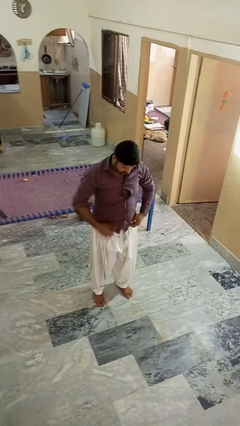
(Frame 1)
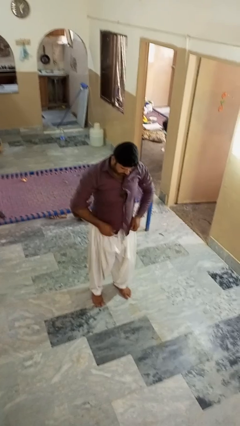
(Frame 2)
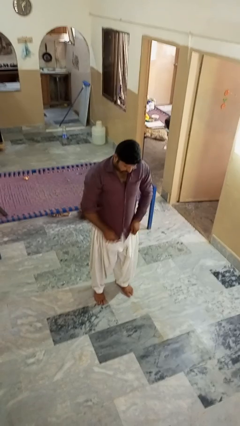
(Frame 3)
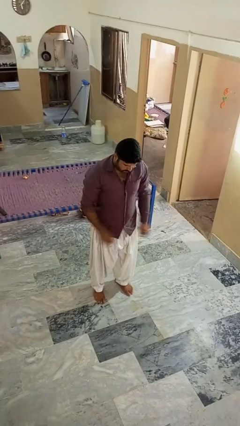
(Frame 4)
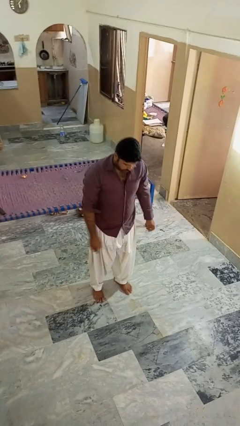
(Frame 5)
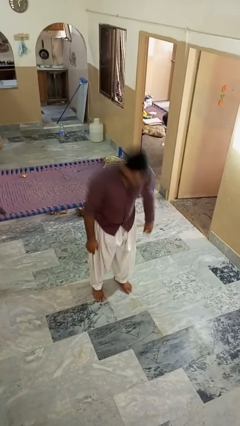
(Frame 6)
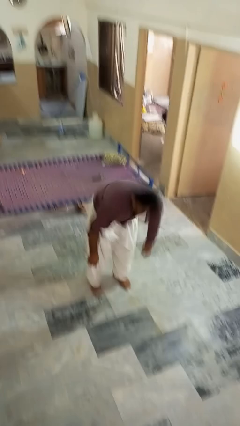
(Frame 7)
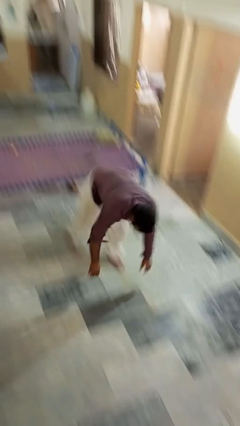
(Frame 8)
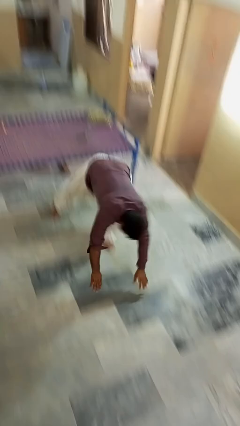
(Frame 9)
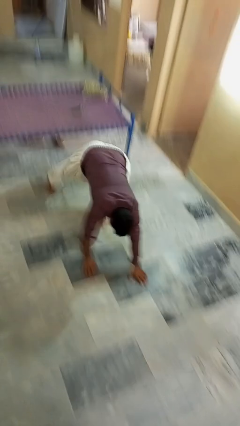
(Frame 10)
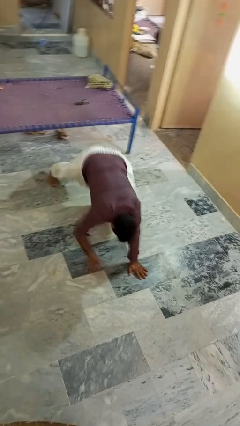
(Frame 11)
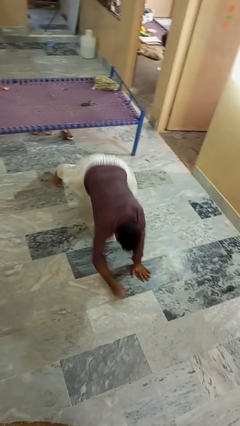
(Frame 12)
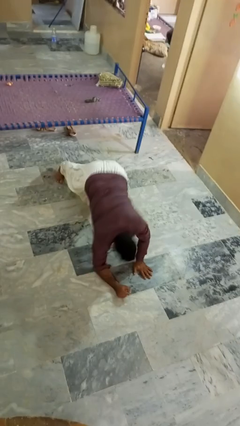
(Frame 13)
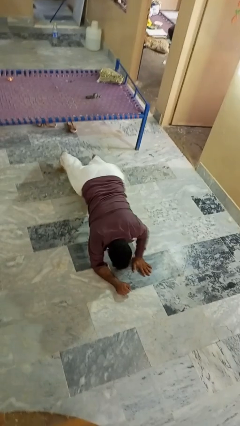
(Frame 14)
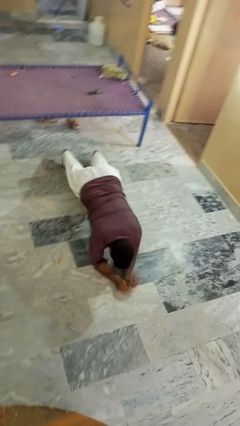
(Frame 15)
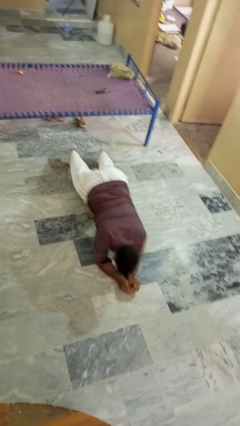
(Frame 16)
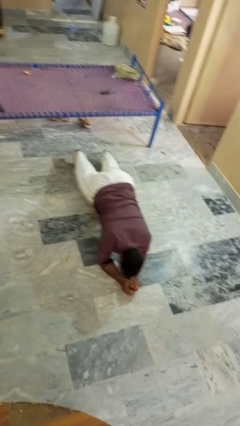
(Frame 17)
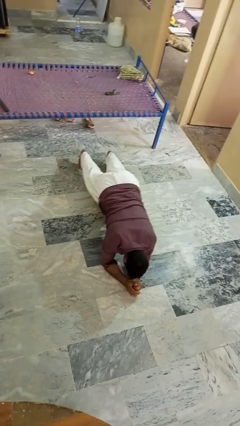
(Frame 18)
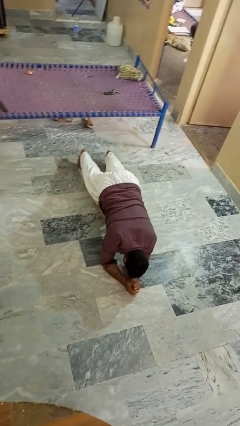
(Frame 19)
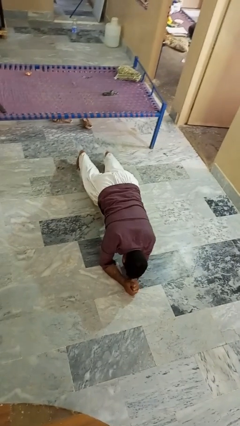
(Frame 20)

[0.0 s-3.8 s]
person exercises with plank

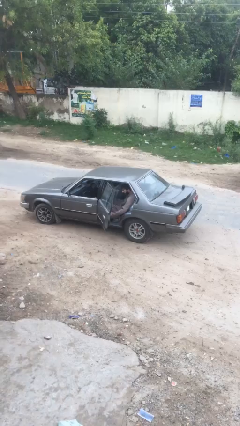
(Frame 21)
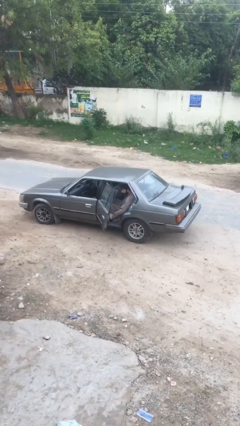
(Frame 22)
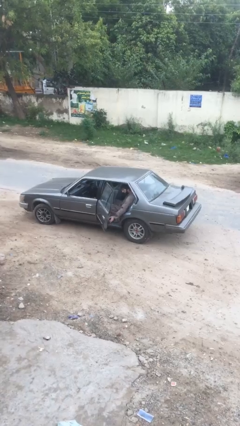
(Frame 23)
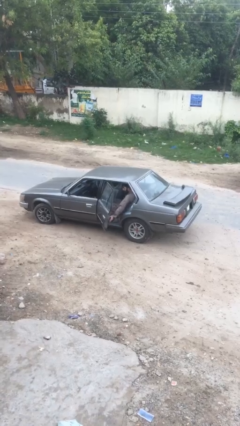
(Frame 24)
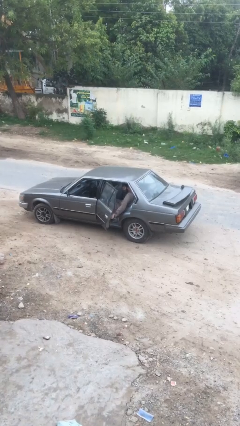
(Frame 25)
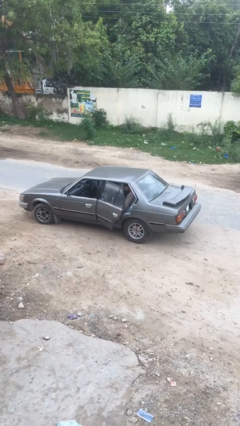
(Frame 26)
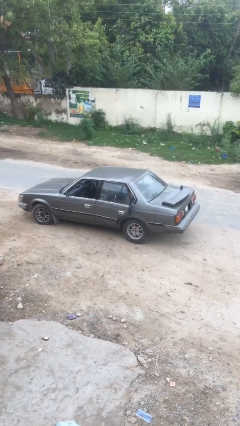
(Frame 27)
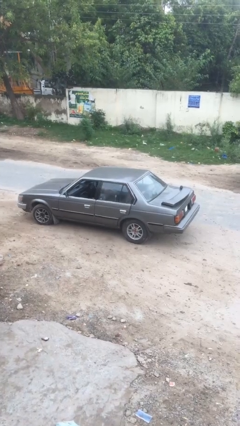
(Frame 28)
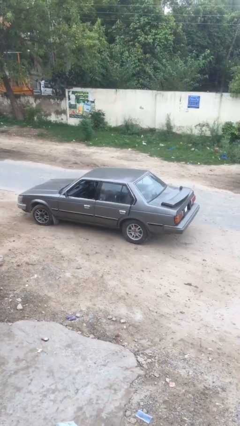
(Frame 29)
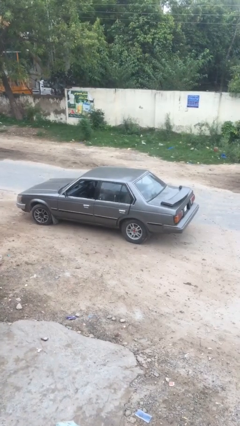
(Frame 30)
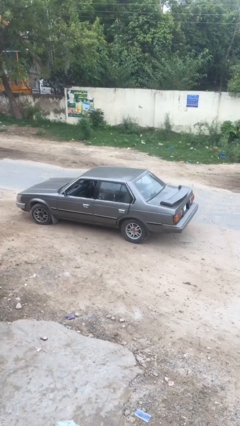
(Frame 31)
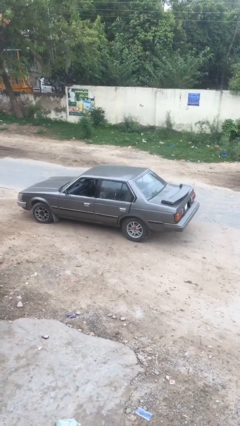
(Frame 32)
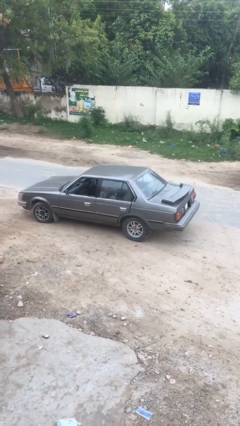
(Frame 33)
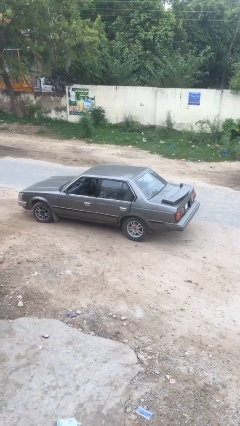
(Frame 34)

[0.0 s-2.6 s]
person closes car door

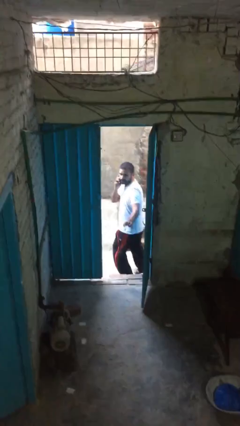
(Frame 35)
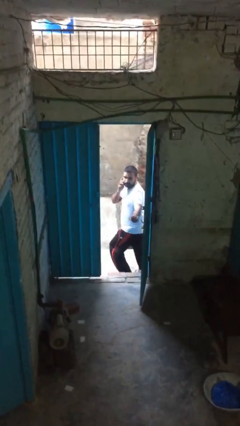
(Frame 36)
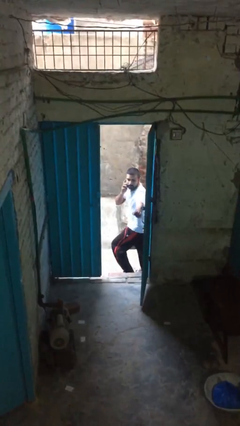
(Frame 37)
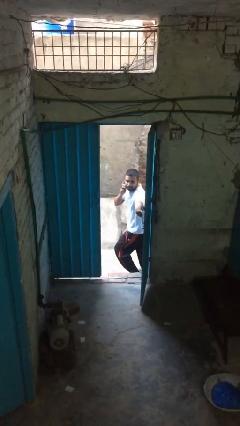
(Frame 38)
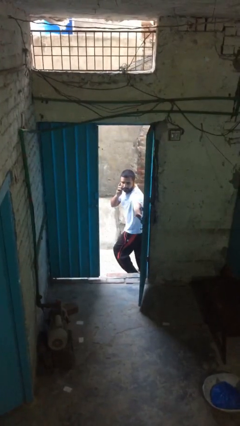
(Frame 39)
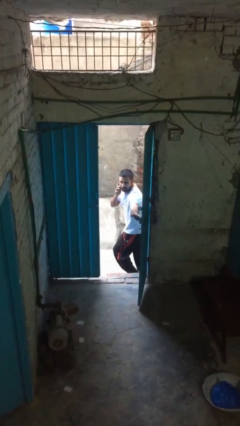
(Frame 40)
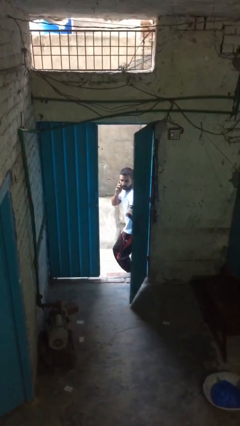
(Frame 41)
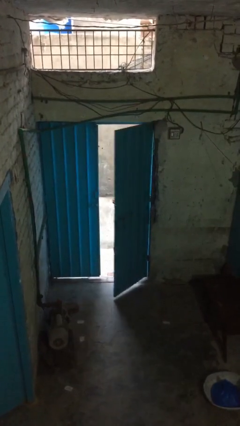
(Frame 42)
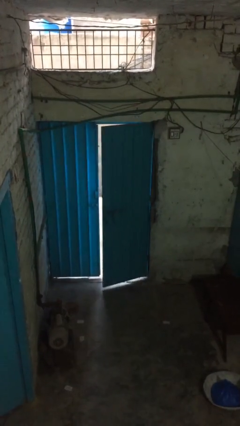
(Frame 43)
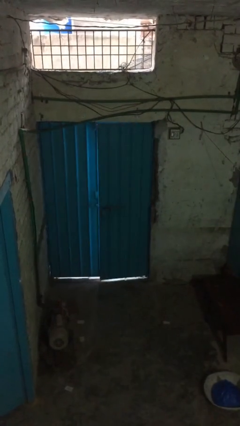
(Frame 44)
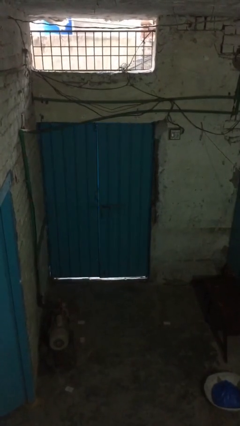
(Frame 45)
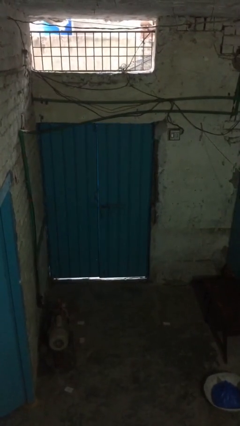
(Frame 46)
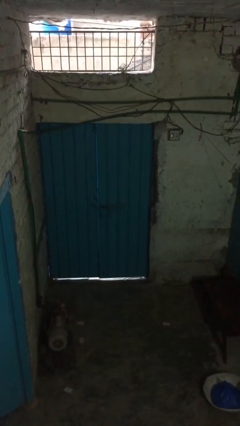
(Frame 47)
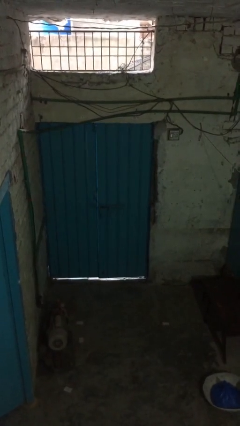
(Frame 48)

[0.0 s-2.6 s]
person closes facility door

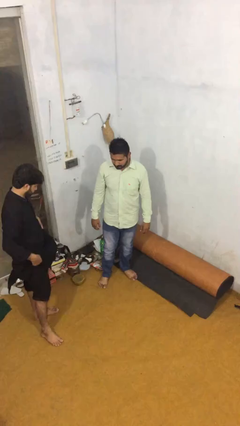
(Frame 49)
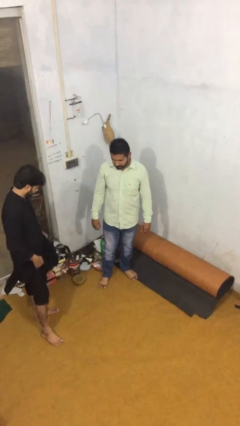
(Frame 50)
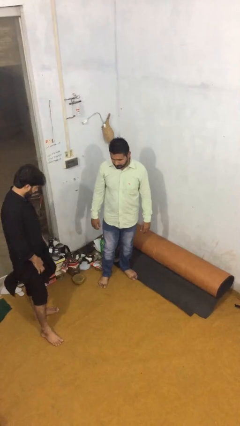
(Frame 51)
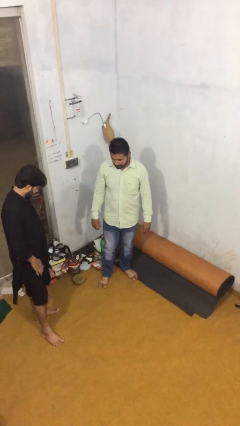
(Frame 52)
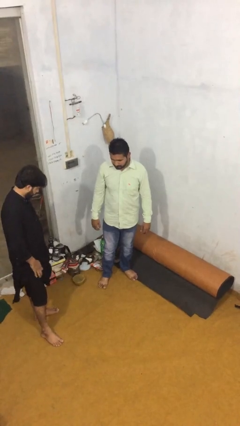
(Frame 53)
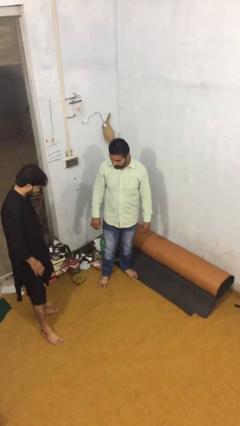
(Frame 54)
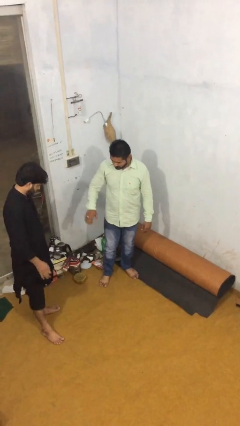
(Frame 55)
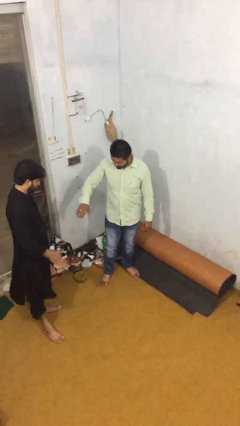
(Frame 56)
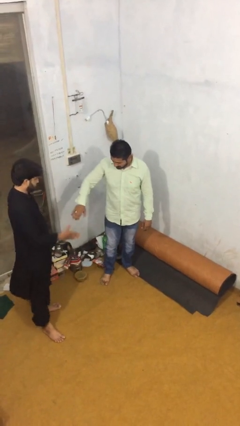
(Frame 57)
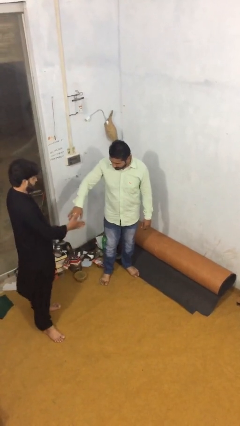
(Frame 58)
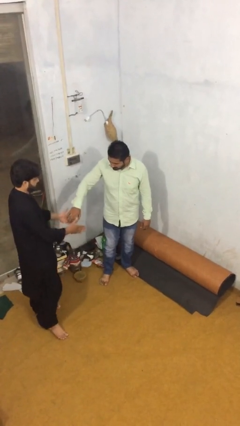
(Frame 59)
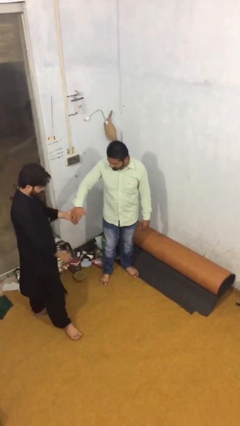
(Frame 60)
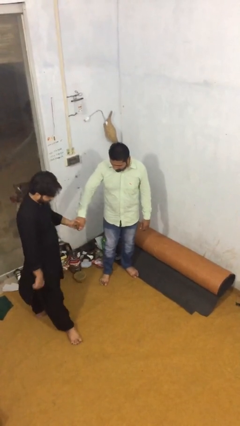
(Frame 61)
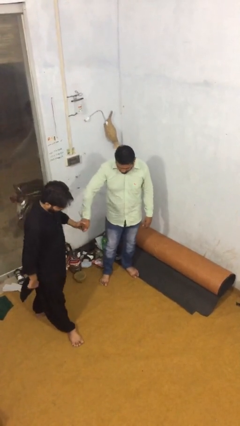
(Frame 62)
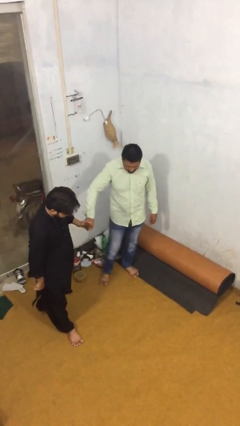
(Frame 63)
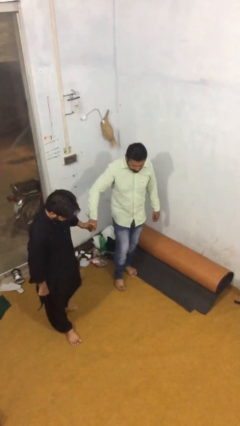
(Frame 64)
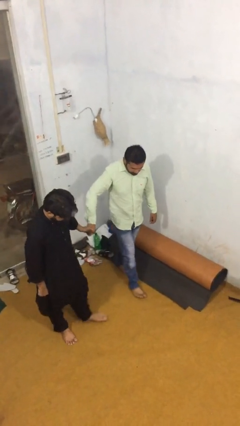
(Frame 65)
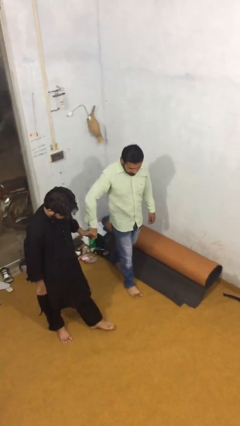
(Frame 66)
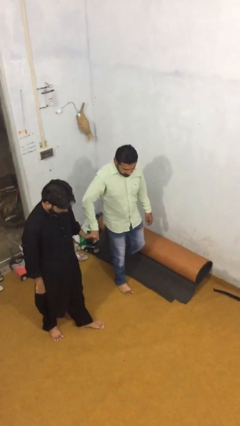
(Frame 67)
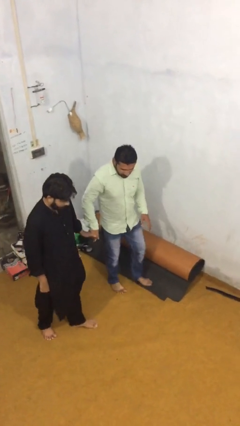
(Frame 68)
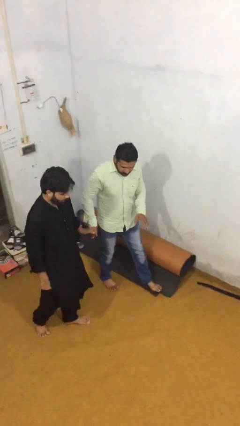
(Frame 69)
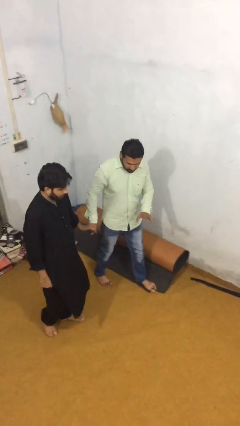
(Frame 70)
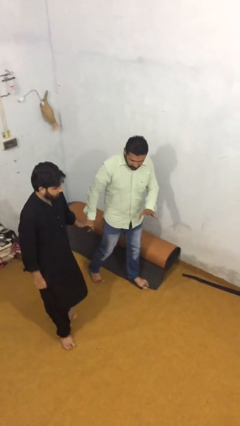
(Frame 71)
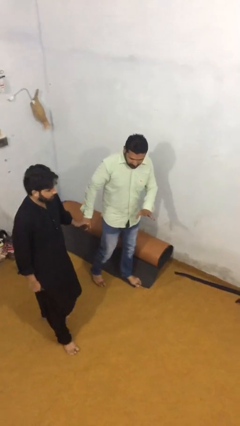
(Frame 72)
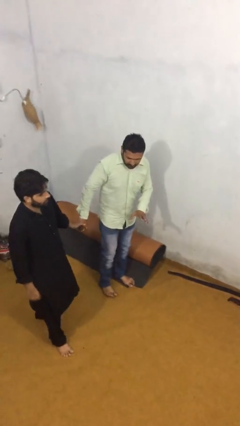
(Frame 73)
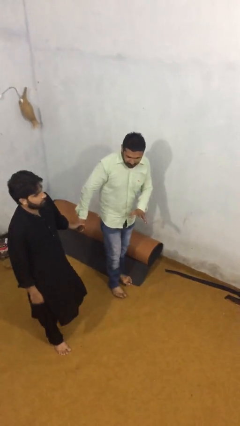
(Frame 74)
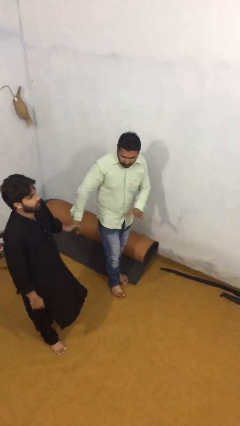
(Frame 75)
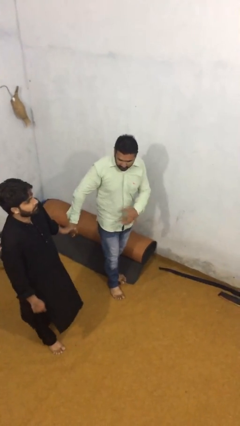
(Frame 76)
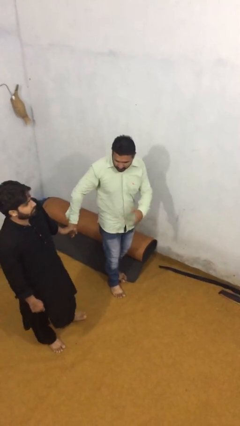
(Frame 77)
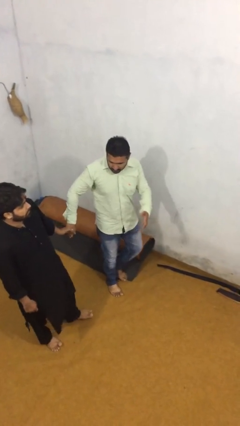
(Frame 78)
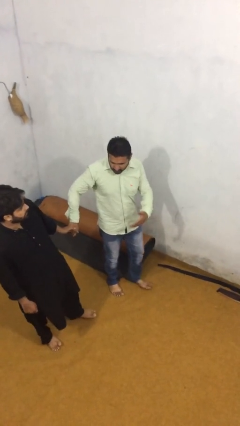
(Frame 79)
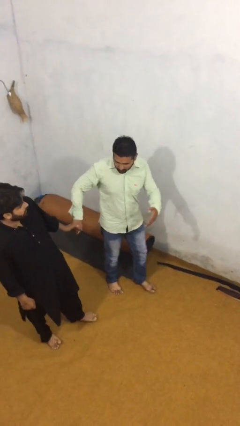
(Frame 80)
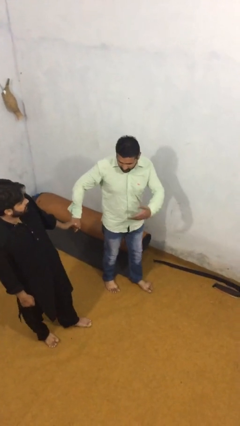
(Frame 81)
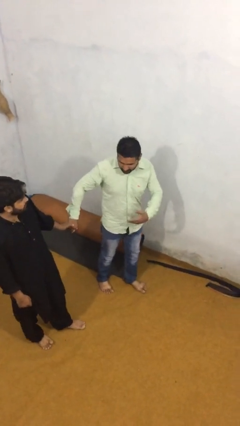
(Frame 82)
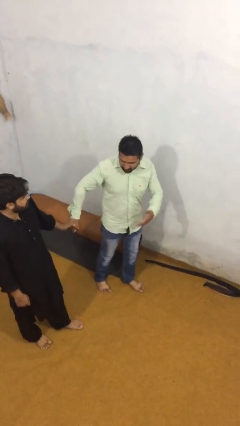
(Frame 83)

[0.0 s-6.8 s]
person holds hand

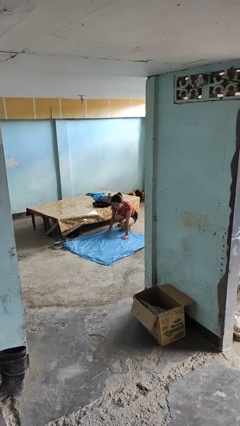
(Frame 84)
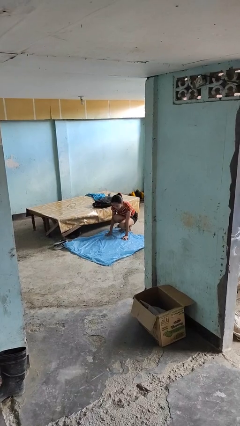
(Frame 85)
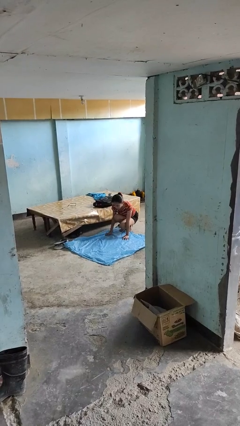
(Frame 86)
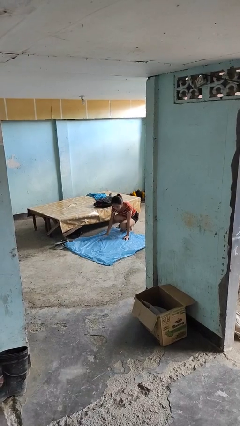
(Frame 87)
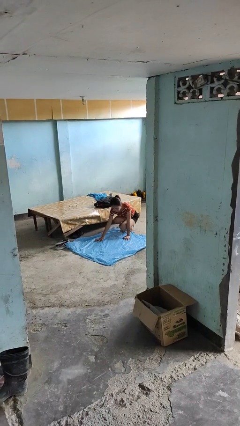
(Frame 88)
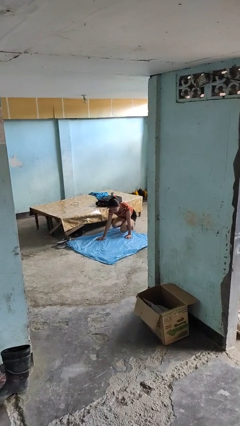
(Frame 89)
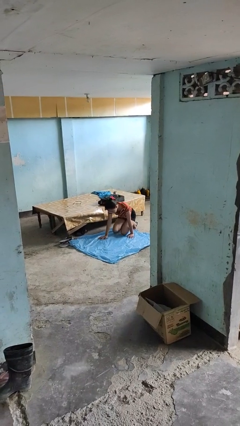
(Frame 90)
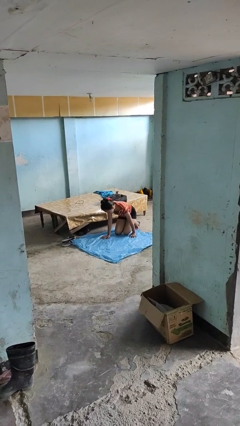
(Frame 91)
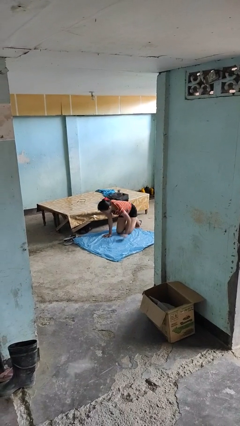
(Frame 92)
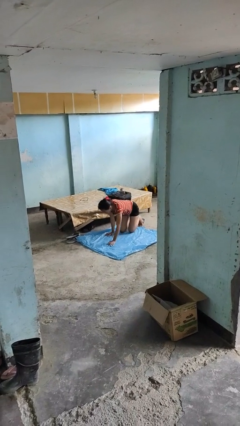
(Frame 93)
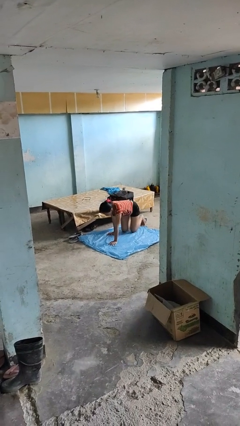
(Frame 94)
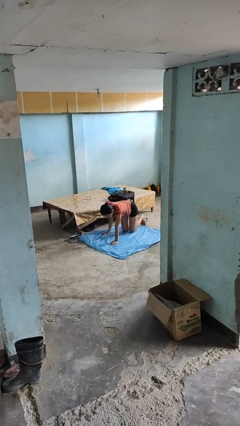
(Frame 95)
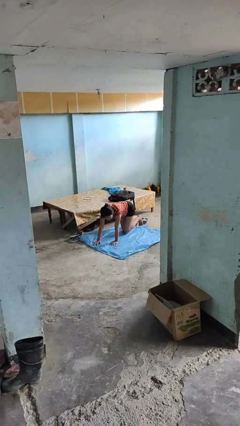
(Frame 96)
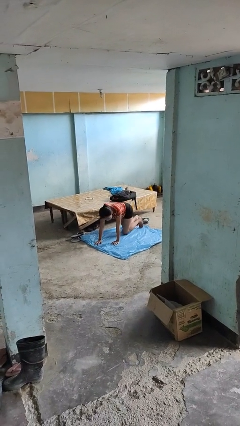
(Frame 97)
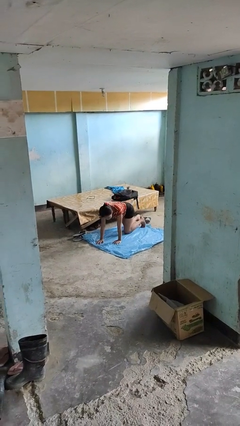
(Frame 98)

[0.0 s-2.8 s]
person crawls
